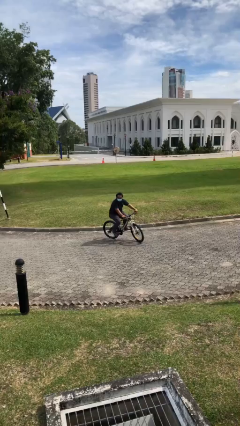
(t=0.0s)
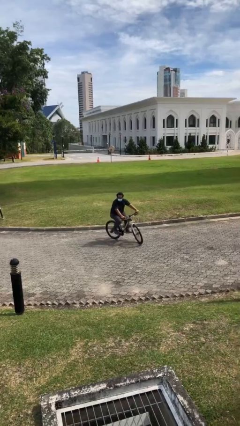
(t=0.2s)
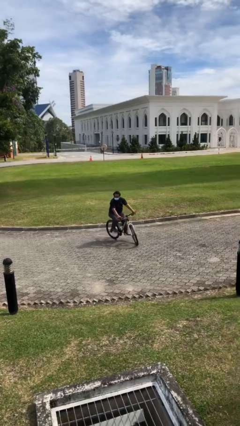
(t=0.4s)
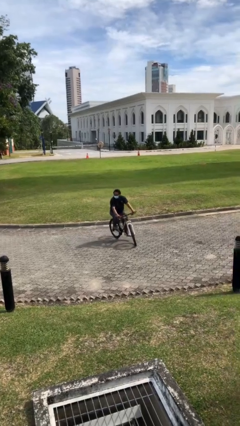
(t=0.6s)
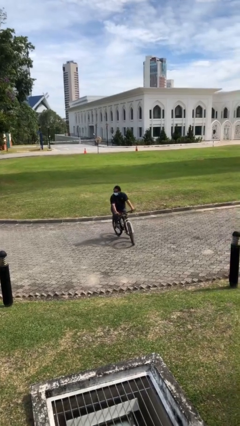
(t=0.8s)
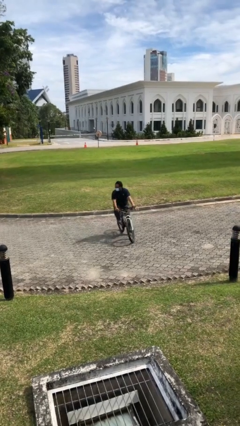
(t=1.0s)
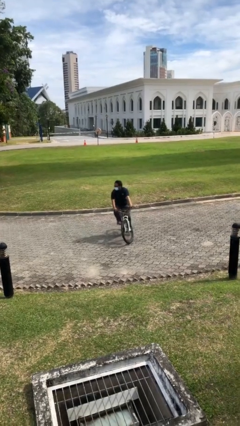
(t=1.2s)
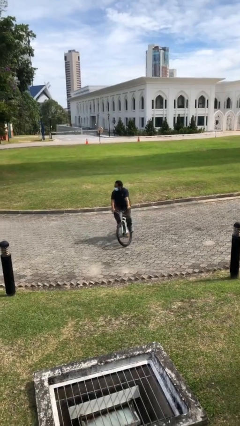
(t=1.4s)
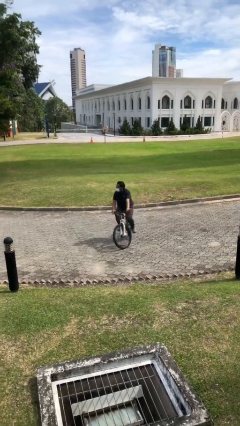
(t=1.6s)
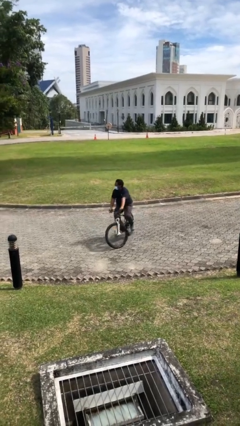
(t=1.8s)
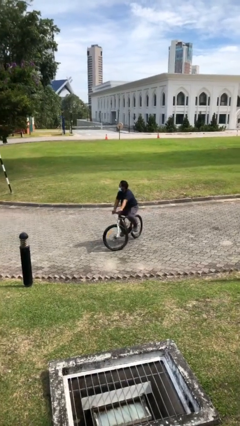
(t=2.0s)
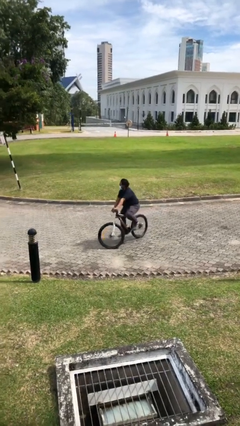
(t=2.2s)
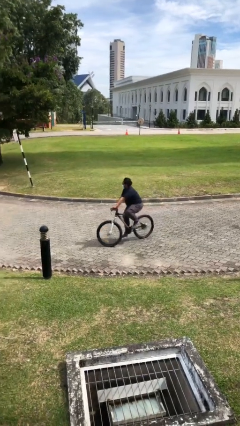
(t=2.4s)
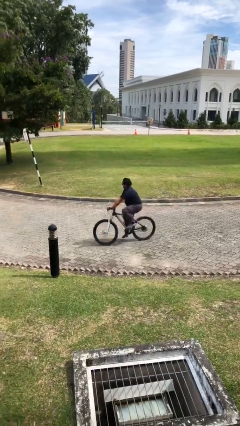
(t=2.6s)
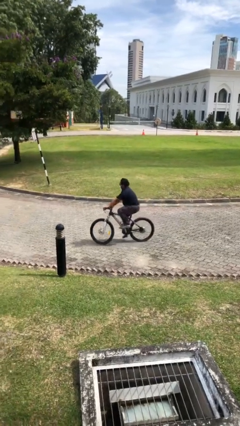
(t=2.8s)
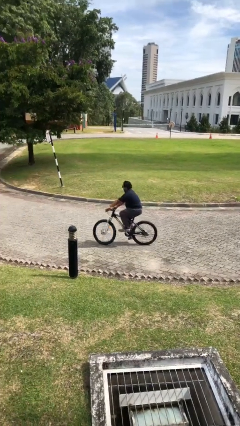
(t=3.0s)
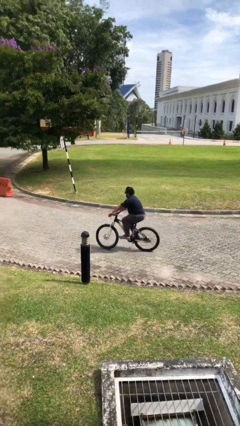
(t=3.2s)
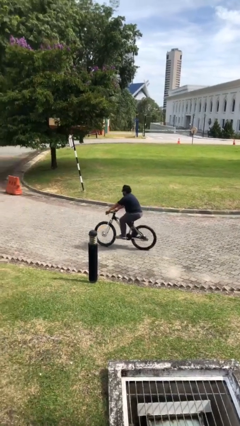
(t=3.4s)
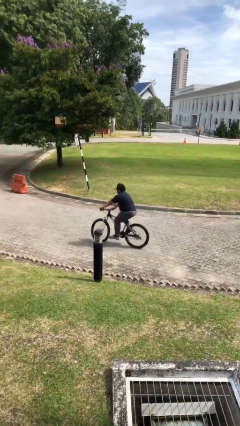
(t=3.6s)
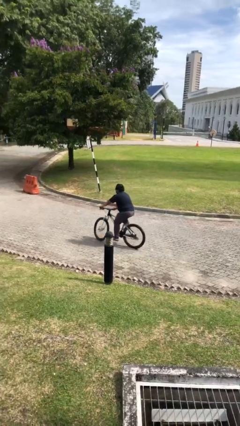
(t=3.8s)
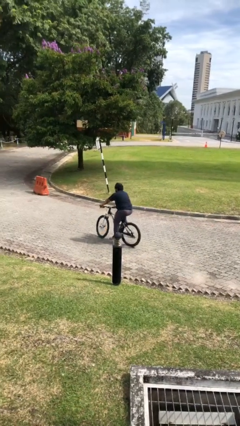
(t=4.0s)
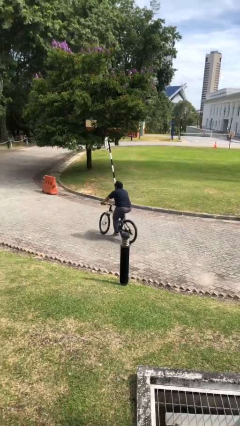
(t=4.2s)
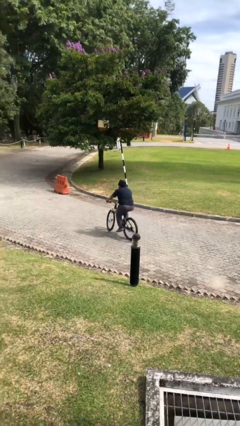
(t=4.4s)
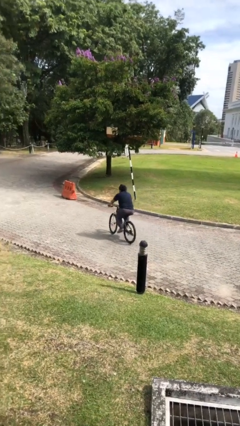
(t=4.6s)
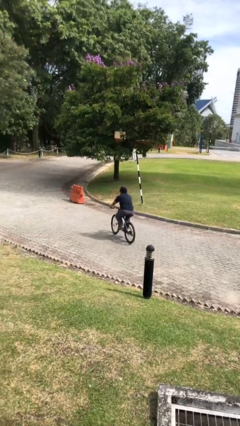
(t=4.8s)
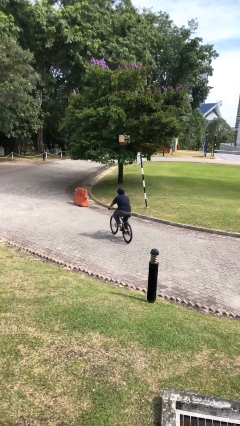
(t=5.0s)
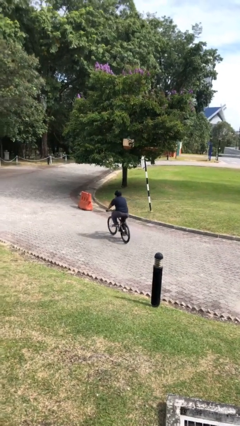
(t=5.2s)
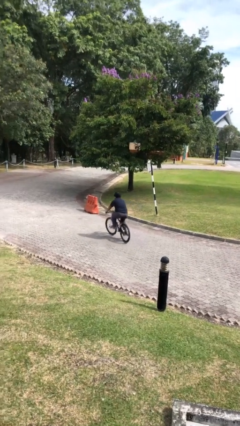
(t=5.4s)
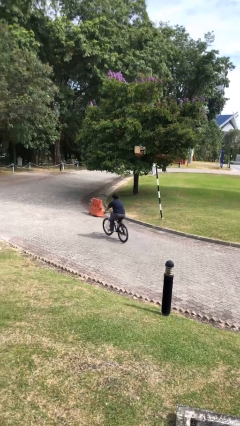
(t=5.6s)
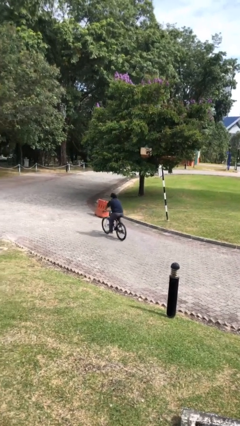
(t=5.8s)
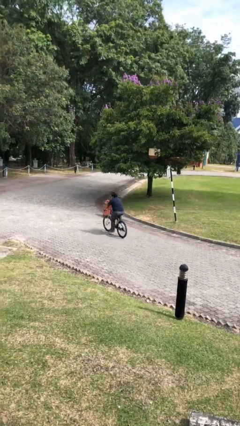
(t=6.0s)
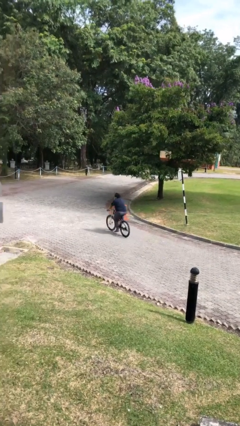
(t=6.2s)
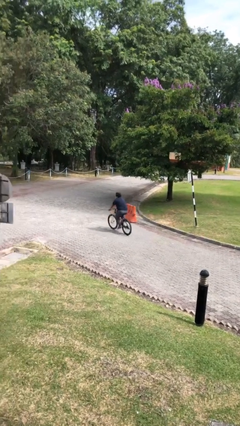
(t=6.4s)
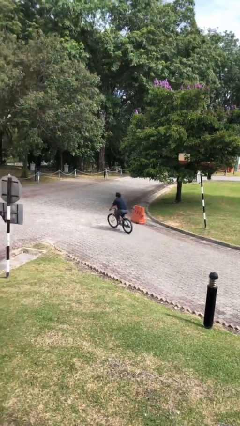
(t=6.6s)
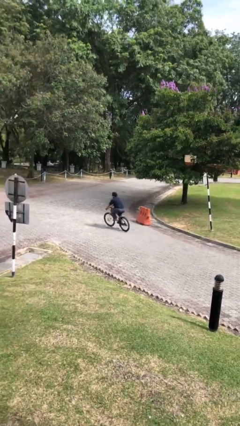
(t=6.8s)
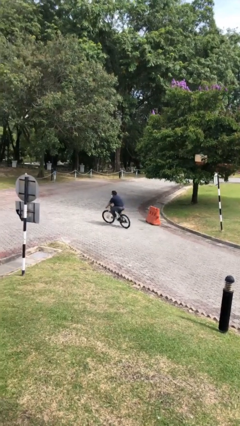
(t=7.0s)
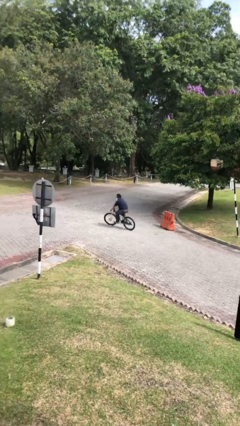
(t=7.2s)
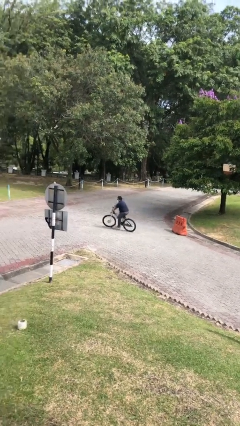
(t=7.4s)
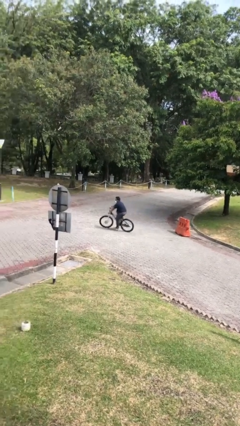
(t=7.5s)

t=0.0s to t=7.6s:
person rides bicycle

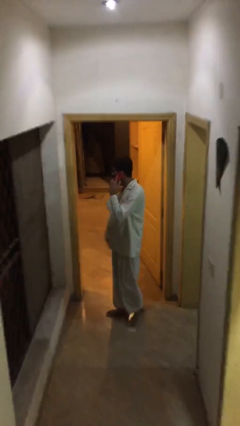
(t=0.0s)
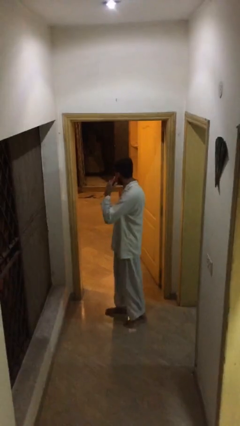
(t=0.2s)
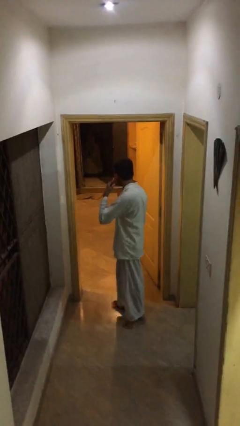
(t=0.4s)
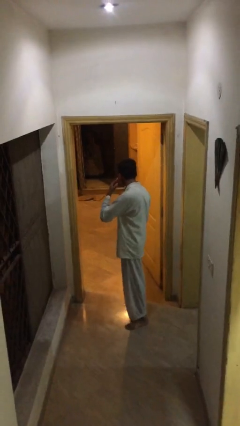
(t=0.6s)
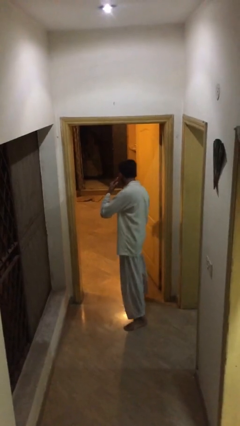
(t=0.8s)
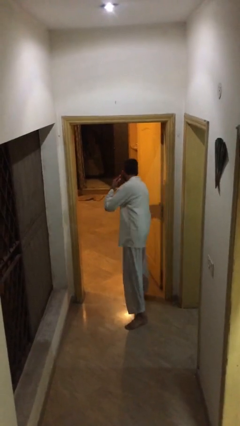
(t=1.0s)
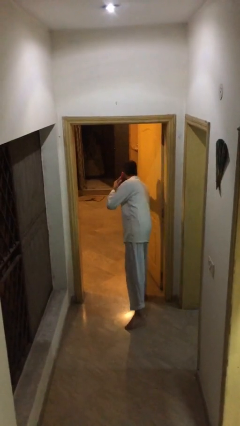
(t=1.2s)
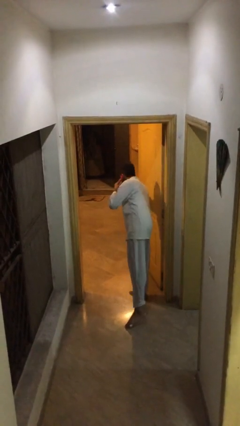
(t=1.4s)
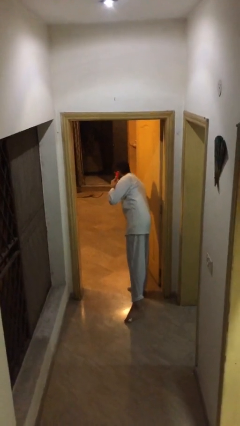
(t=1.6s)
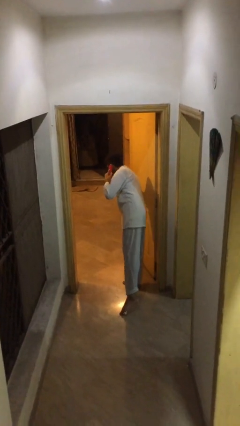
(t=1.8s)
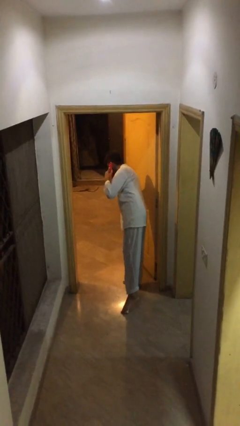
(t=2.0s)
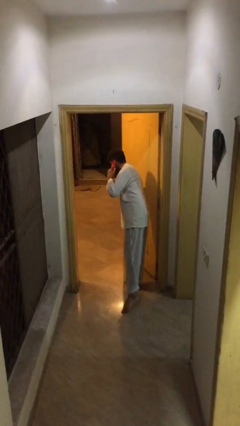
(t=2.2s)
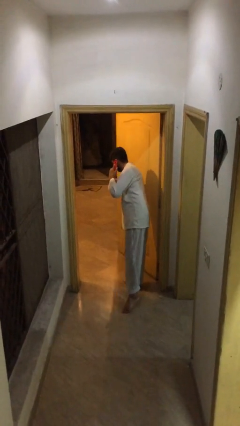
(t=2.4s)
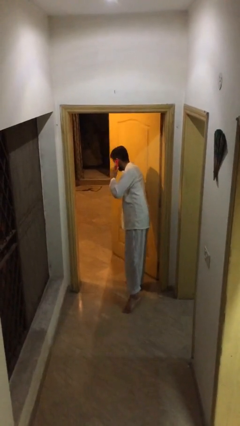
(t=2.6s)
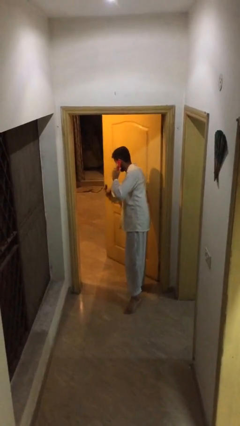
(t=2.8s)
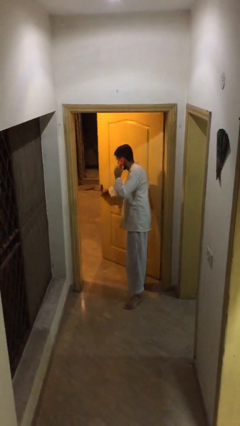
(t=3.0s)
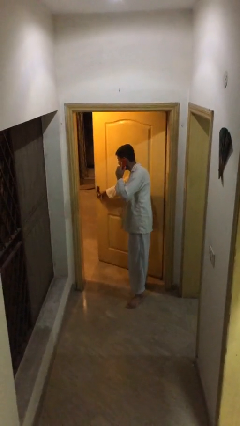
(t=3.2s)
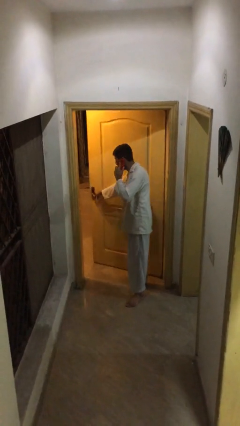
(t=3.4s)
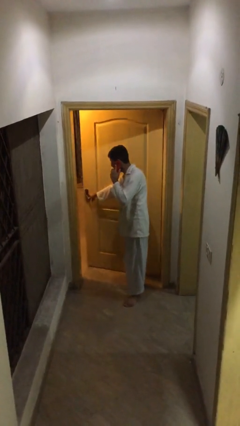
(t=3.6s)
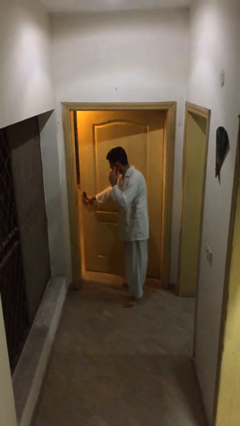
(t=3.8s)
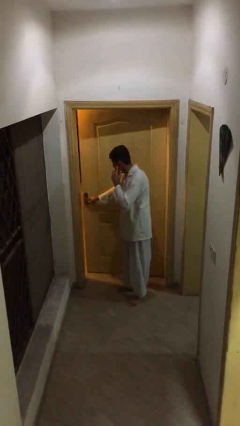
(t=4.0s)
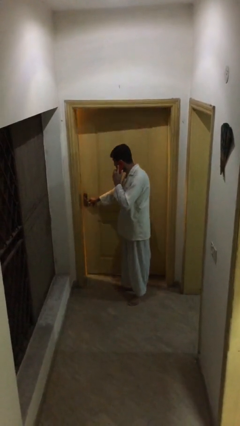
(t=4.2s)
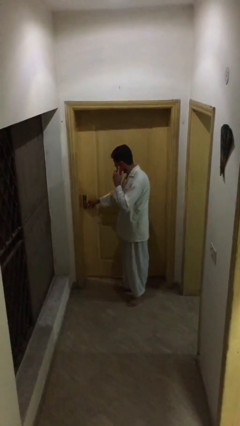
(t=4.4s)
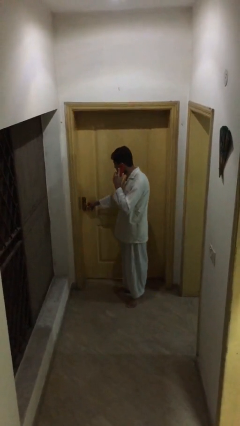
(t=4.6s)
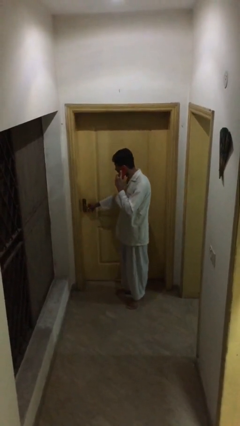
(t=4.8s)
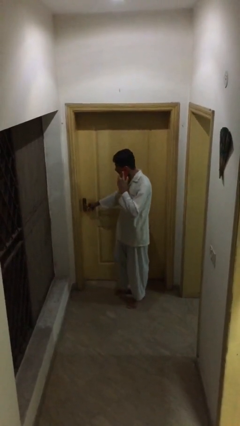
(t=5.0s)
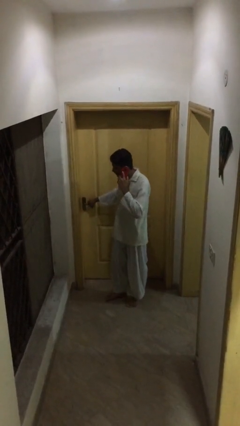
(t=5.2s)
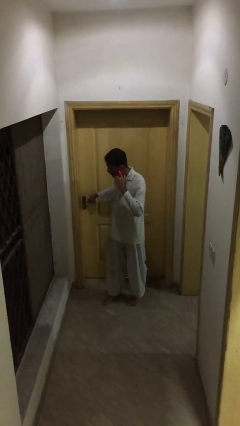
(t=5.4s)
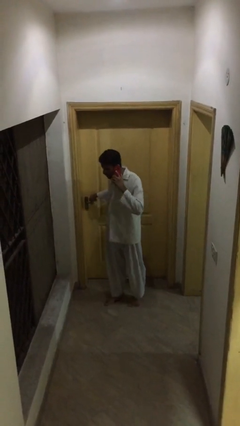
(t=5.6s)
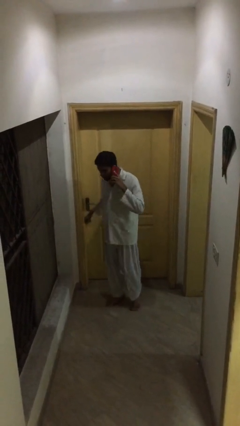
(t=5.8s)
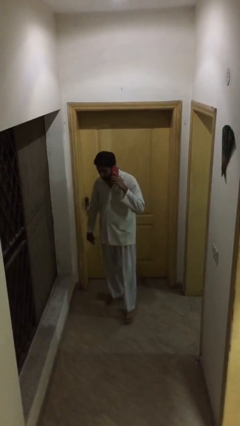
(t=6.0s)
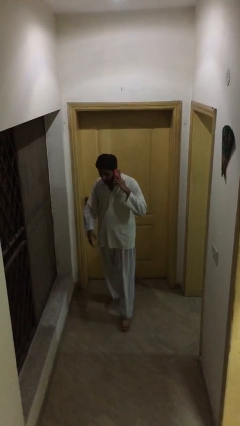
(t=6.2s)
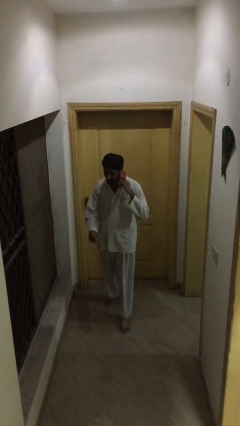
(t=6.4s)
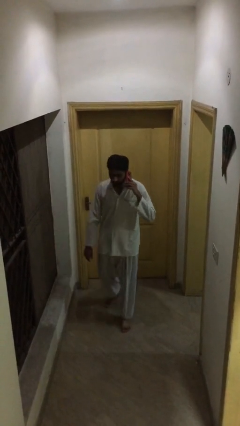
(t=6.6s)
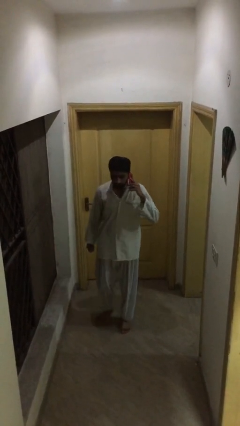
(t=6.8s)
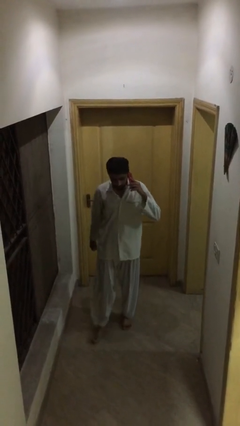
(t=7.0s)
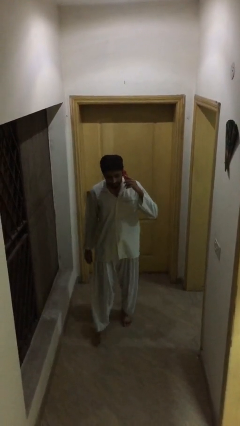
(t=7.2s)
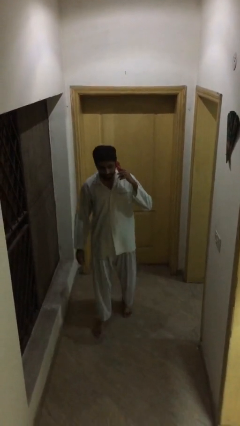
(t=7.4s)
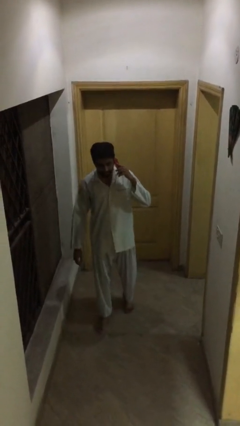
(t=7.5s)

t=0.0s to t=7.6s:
person closes facility door

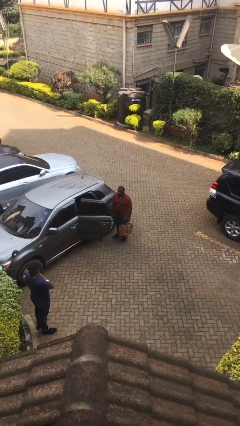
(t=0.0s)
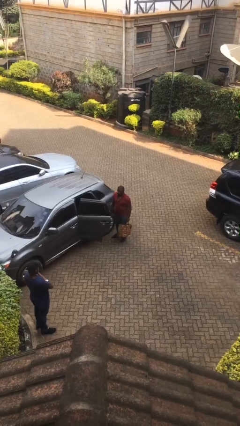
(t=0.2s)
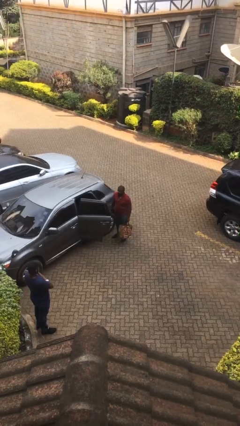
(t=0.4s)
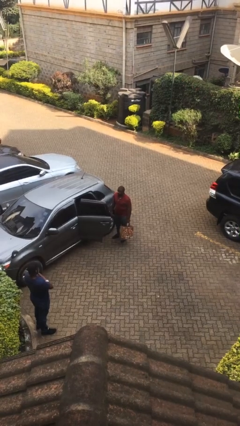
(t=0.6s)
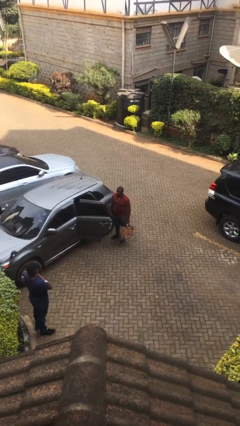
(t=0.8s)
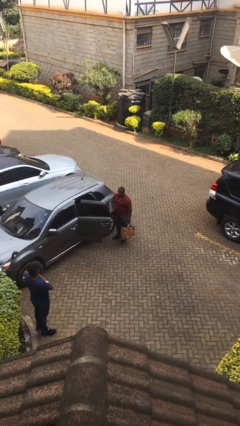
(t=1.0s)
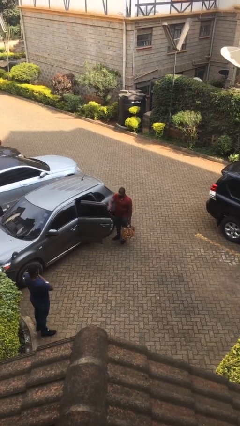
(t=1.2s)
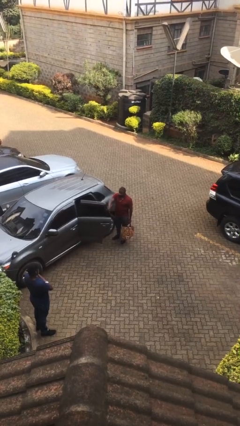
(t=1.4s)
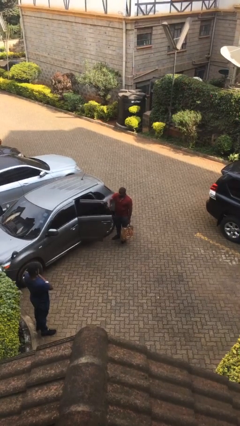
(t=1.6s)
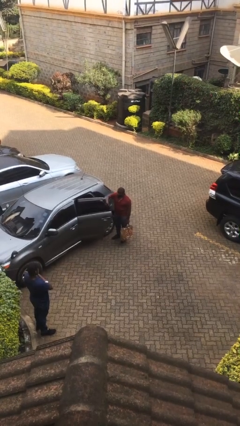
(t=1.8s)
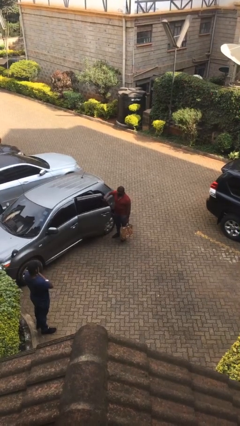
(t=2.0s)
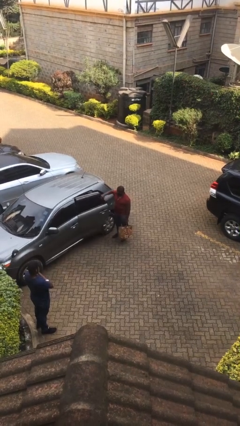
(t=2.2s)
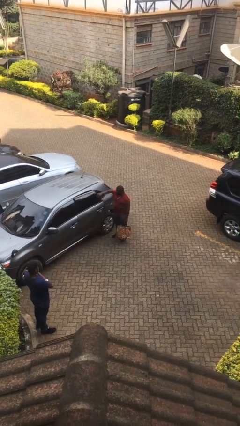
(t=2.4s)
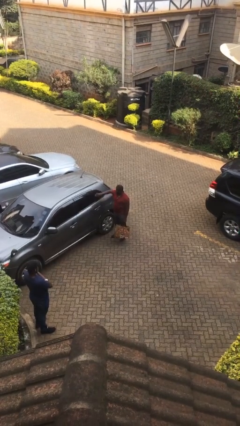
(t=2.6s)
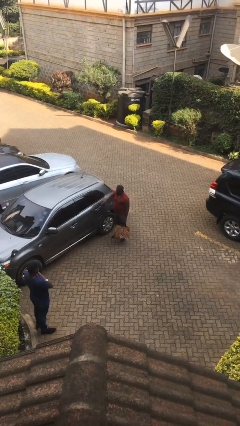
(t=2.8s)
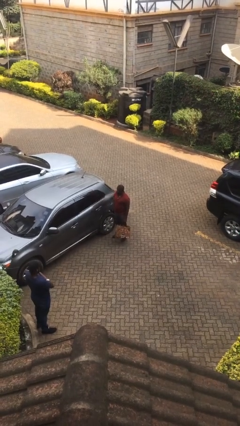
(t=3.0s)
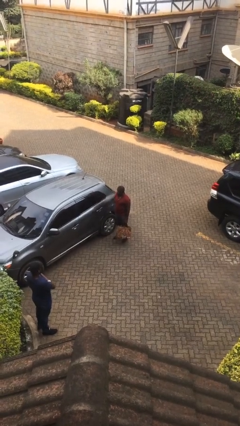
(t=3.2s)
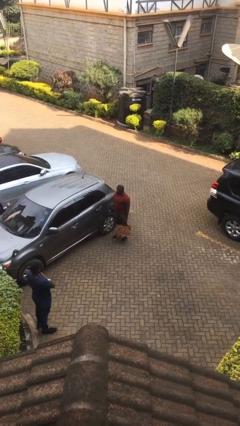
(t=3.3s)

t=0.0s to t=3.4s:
person closes car door
